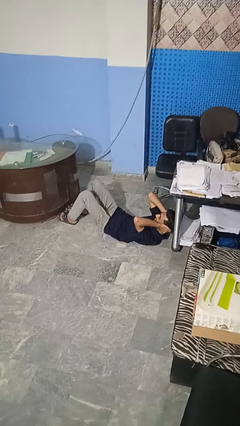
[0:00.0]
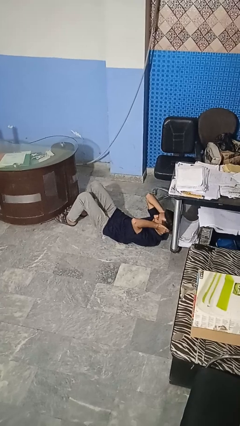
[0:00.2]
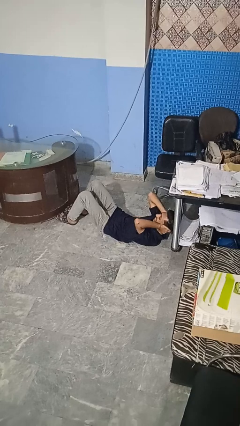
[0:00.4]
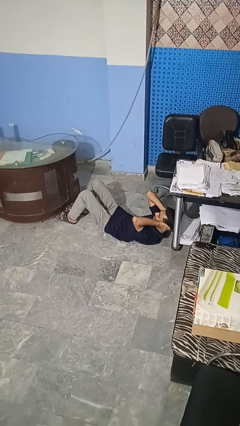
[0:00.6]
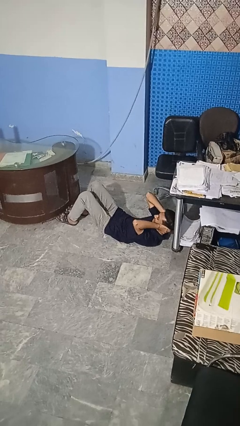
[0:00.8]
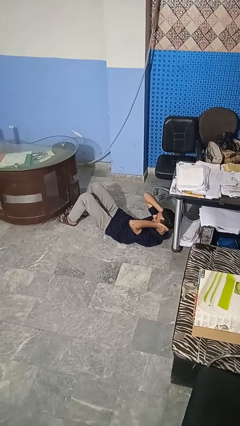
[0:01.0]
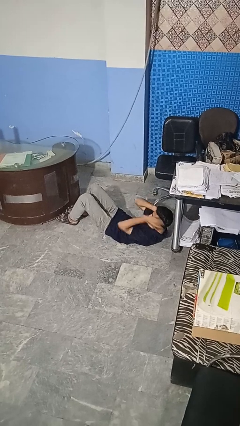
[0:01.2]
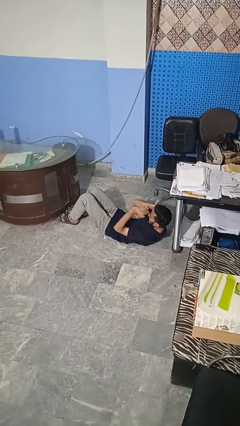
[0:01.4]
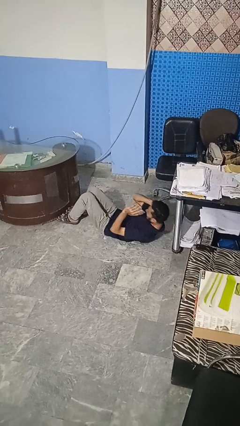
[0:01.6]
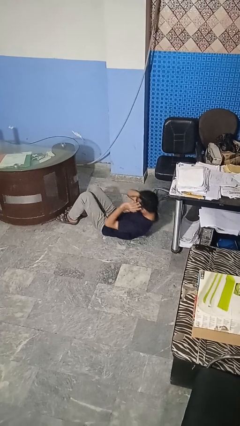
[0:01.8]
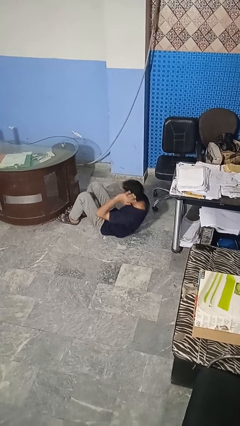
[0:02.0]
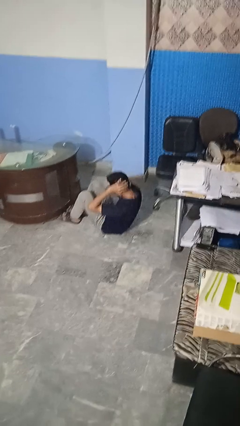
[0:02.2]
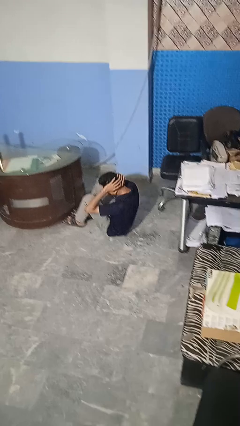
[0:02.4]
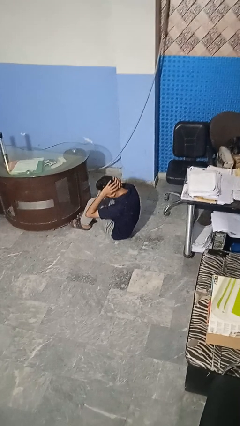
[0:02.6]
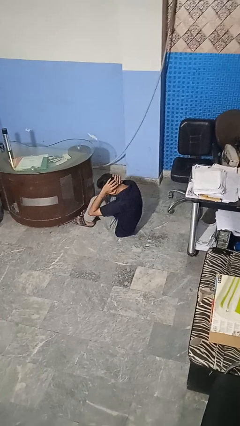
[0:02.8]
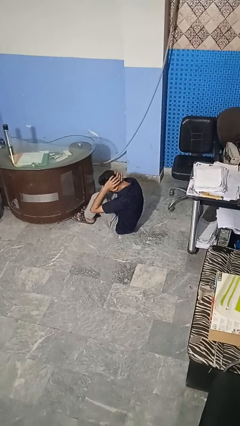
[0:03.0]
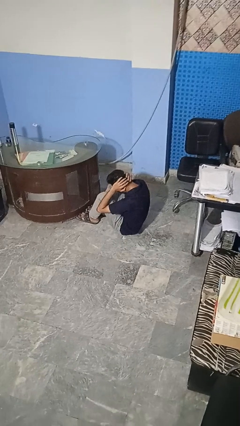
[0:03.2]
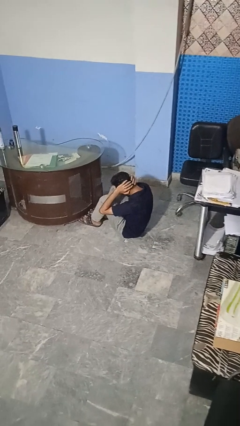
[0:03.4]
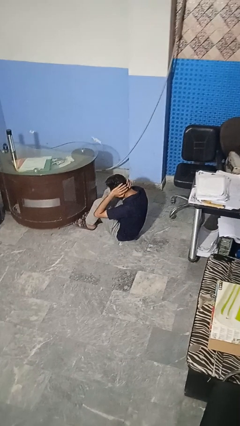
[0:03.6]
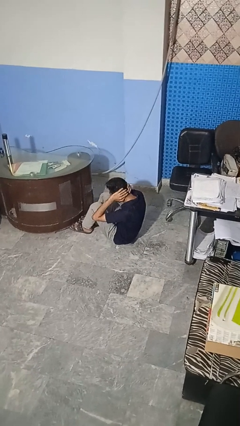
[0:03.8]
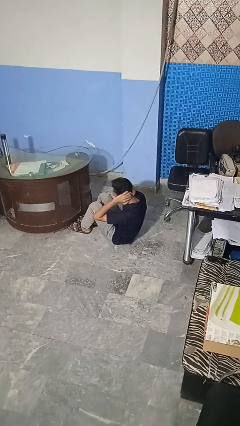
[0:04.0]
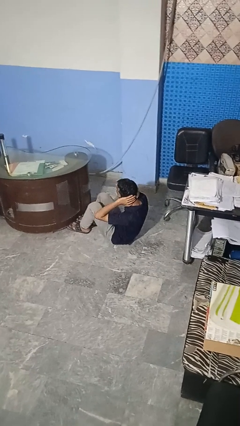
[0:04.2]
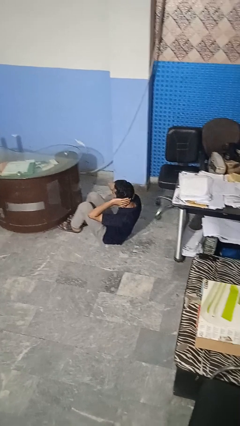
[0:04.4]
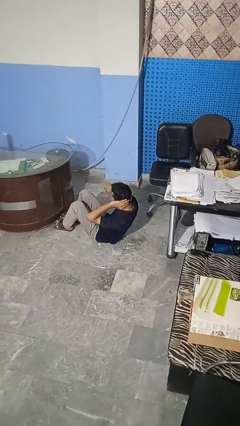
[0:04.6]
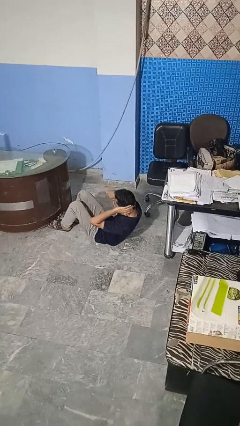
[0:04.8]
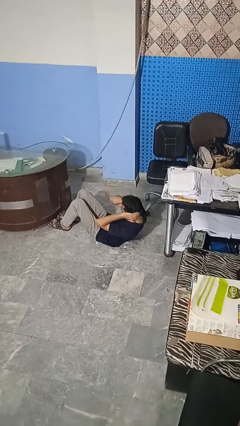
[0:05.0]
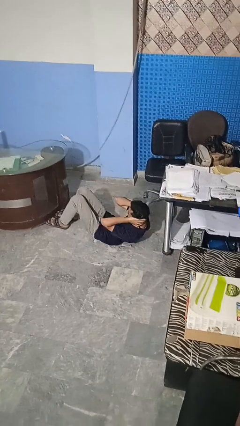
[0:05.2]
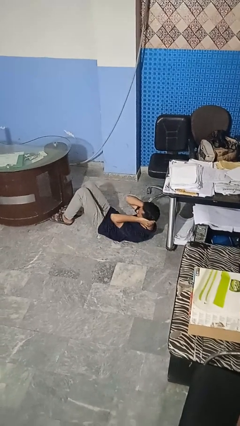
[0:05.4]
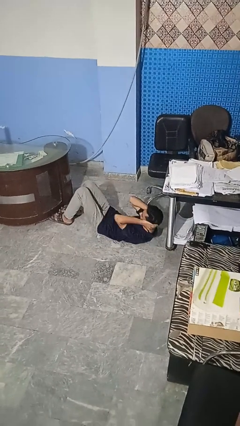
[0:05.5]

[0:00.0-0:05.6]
person exercises with situp

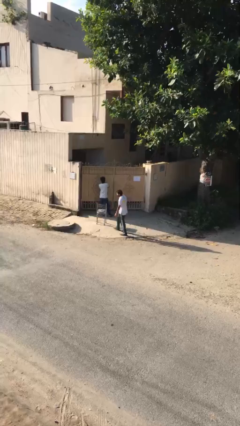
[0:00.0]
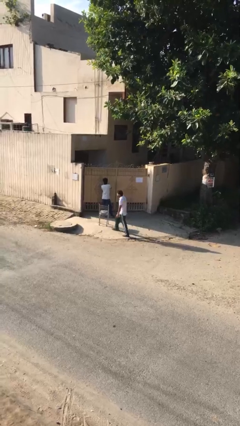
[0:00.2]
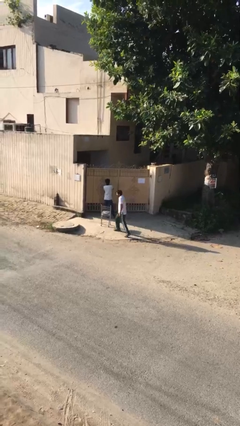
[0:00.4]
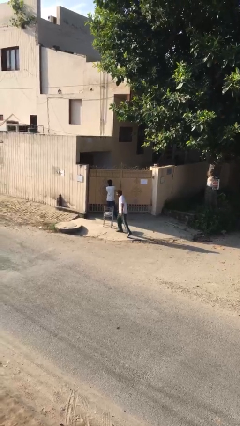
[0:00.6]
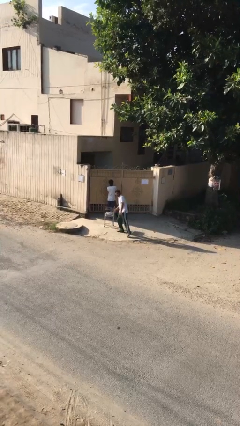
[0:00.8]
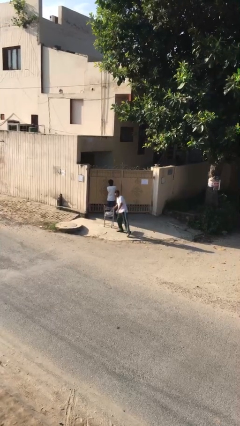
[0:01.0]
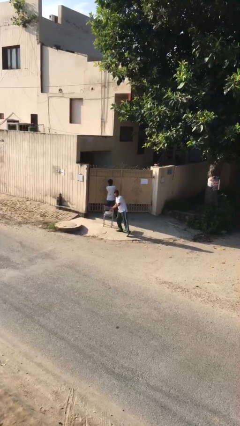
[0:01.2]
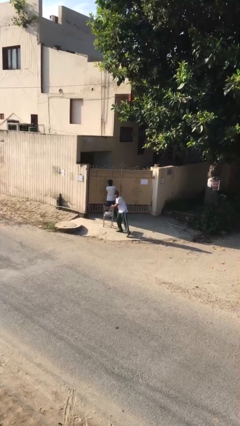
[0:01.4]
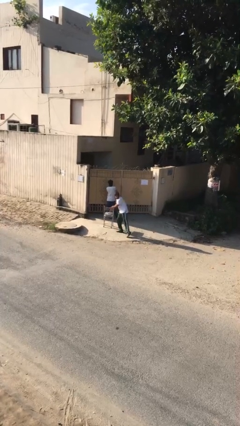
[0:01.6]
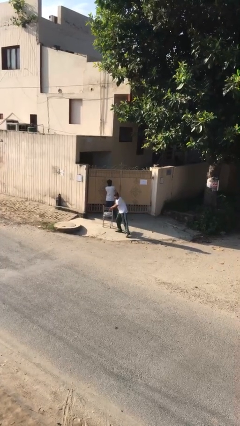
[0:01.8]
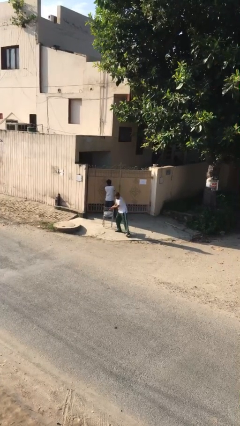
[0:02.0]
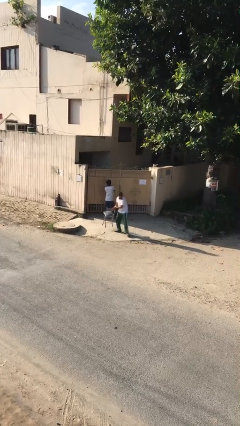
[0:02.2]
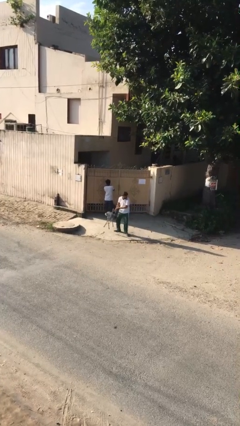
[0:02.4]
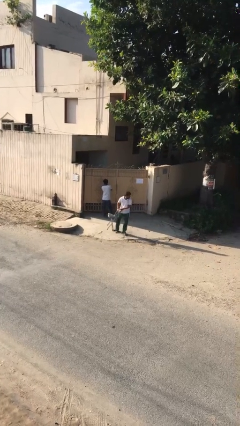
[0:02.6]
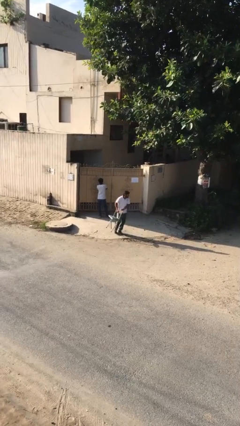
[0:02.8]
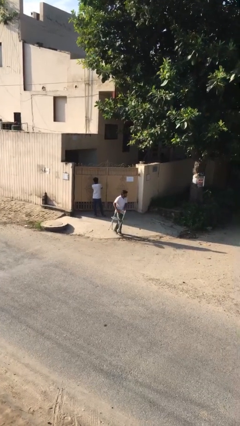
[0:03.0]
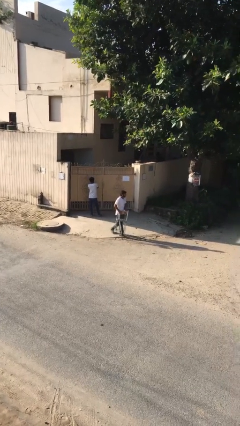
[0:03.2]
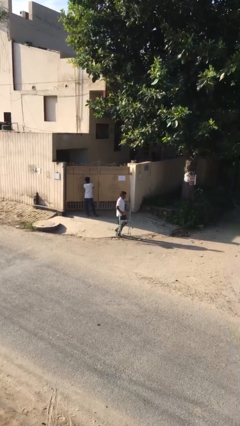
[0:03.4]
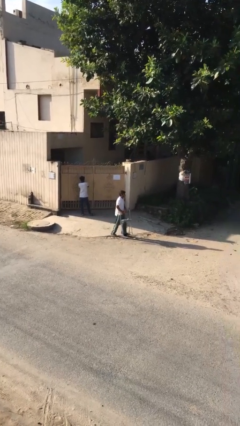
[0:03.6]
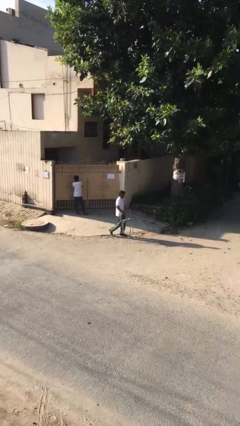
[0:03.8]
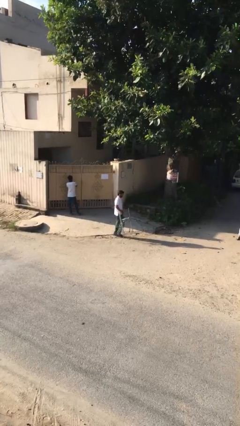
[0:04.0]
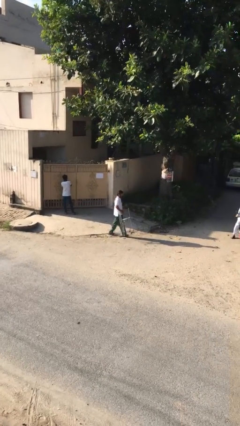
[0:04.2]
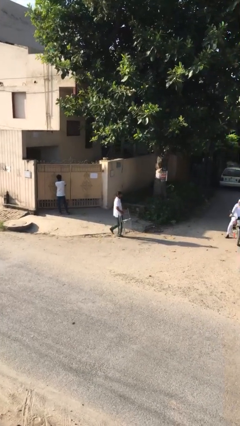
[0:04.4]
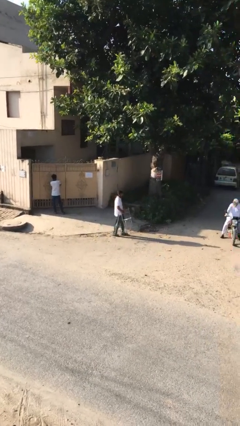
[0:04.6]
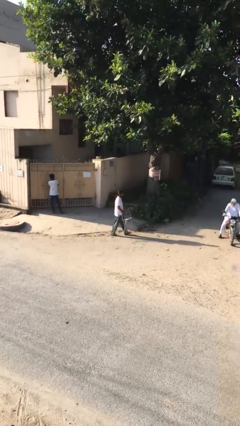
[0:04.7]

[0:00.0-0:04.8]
person steals object from person

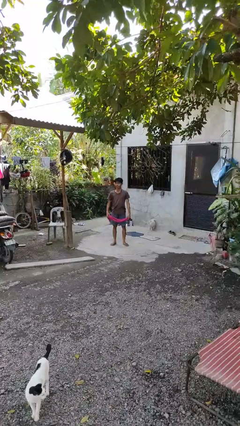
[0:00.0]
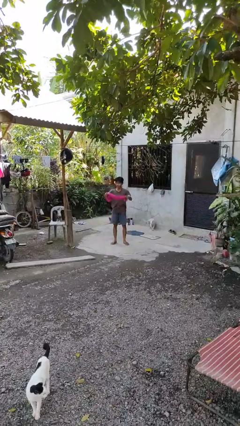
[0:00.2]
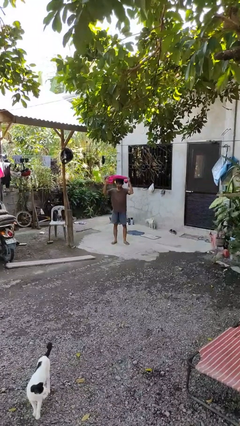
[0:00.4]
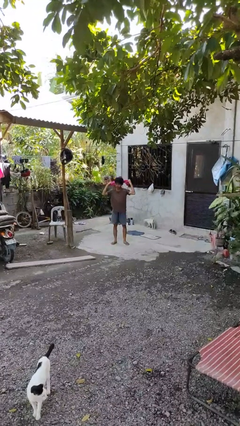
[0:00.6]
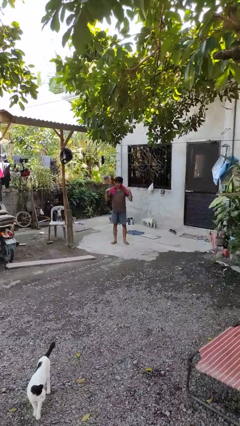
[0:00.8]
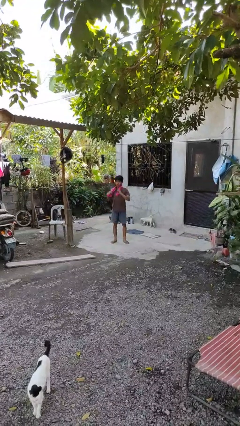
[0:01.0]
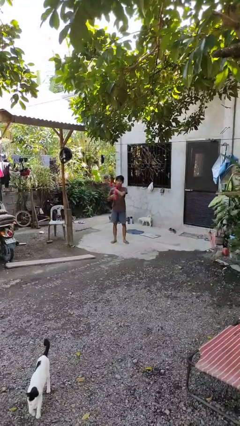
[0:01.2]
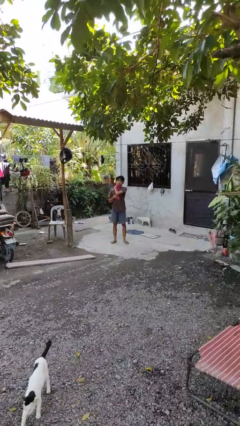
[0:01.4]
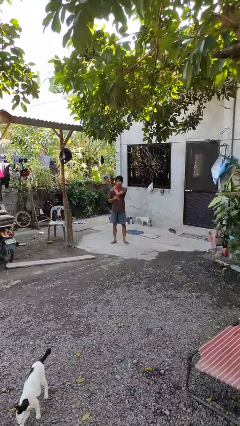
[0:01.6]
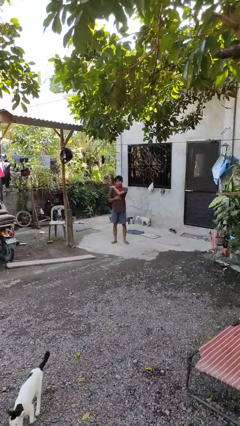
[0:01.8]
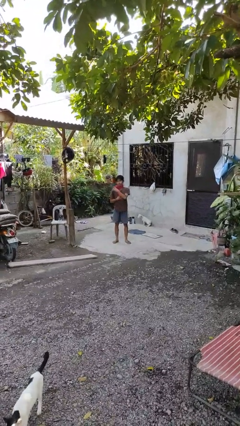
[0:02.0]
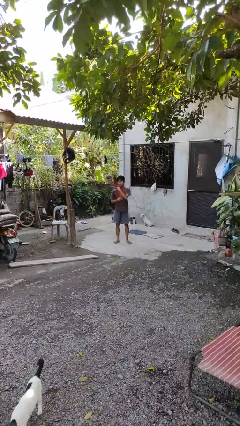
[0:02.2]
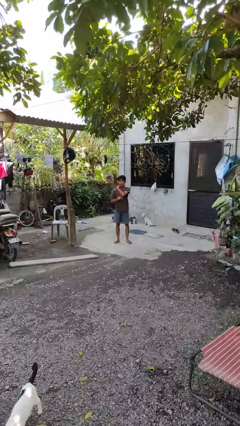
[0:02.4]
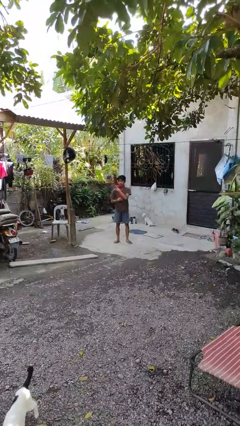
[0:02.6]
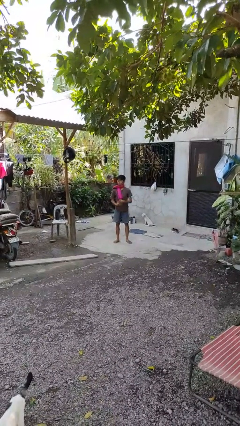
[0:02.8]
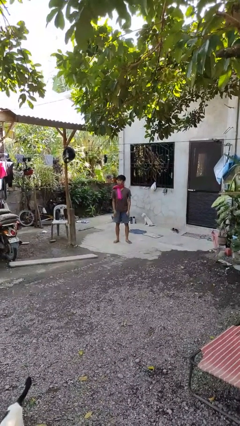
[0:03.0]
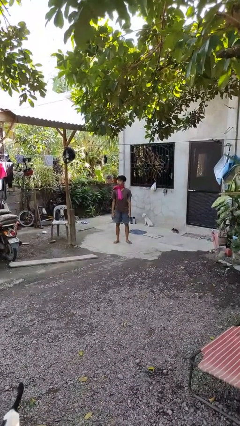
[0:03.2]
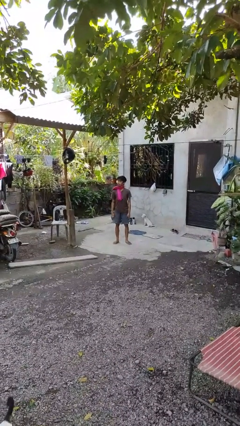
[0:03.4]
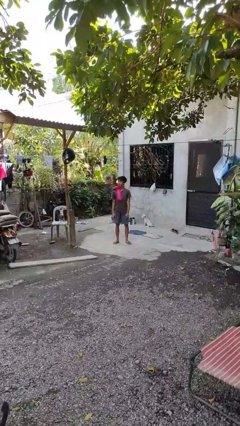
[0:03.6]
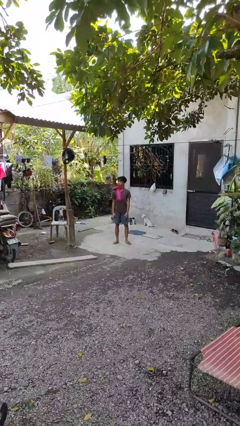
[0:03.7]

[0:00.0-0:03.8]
person puts on scarf

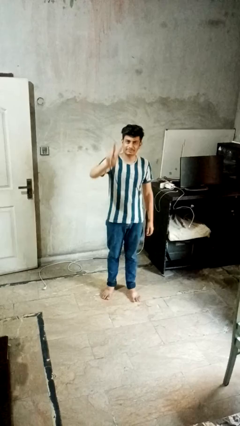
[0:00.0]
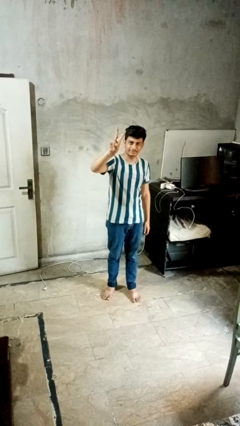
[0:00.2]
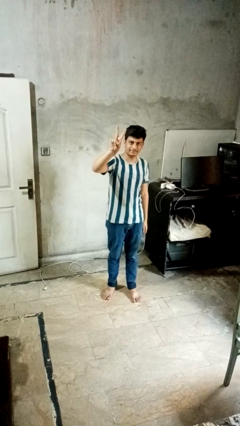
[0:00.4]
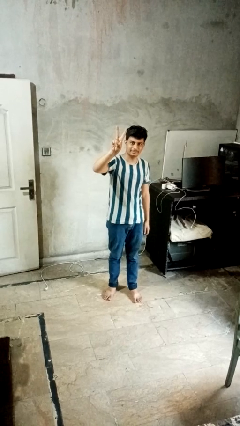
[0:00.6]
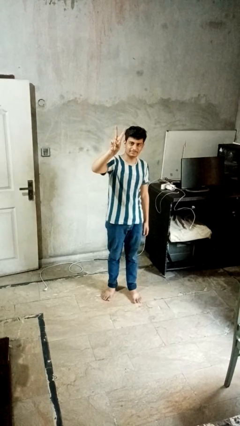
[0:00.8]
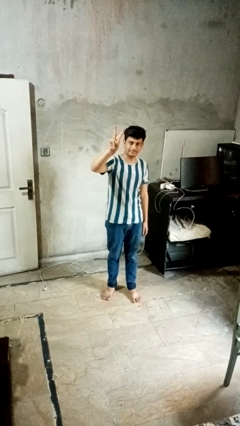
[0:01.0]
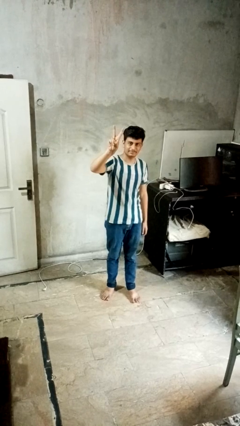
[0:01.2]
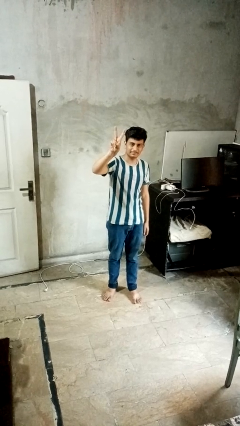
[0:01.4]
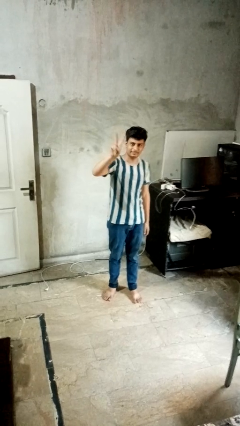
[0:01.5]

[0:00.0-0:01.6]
person gestures peace

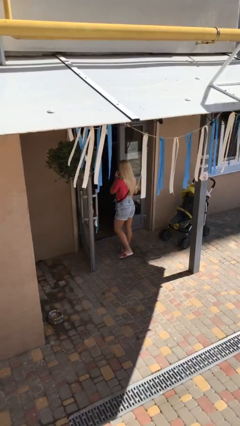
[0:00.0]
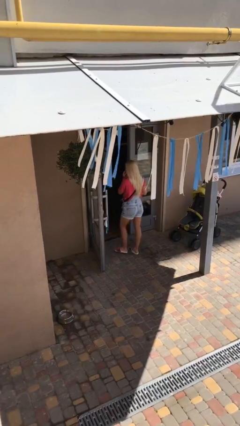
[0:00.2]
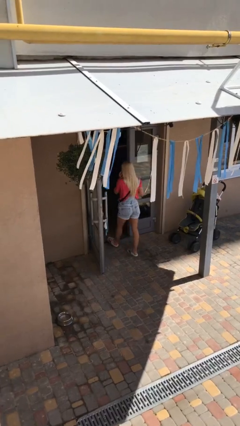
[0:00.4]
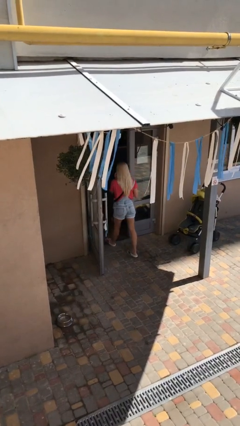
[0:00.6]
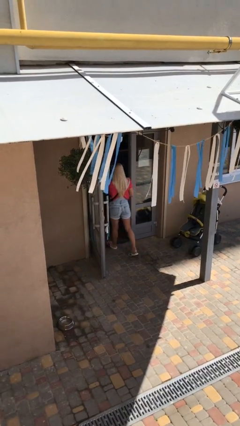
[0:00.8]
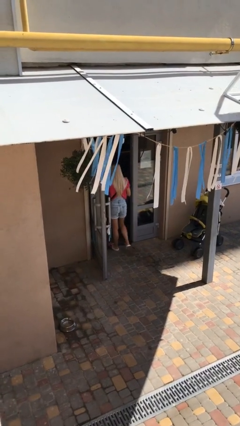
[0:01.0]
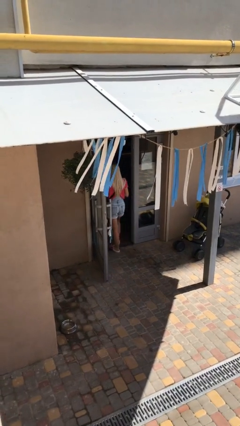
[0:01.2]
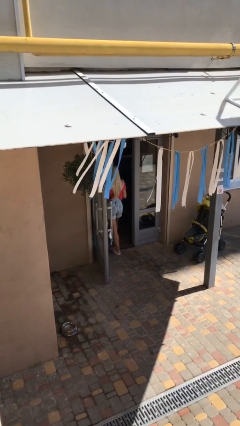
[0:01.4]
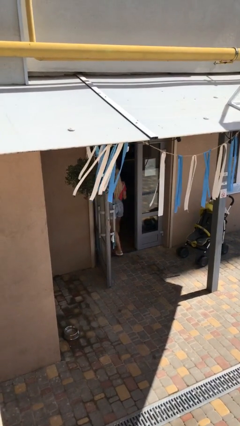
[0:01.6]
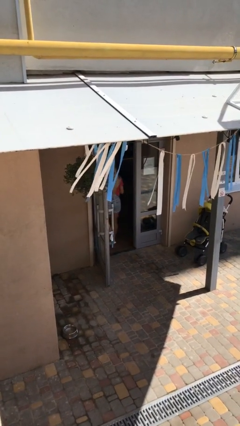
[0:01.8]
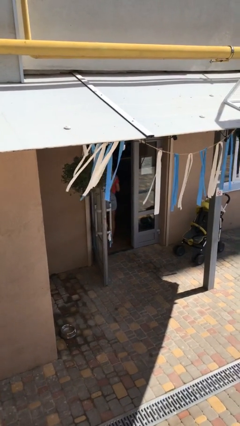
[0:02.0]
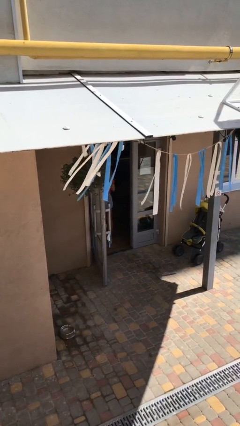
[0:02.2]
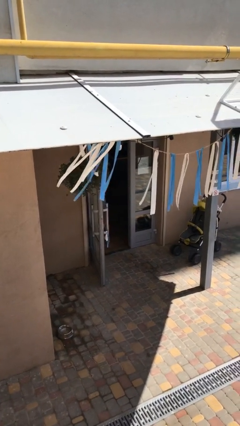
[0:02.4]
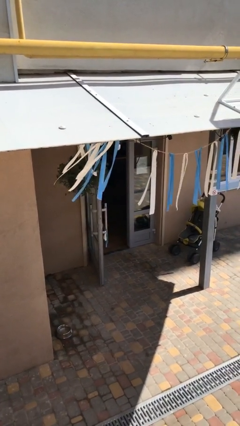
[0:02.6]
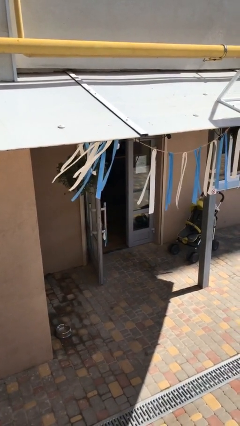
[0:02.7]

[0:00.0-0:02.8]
person exits scene through structure
